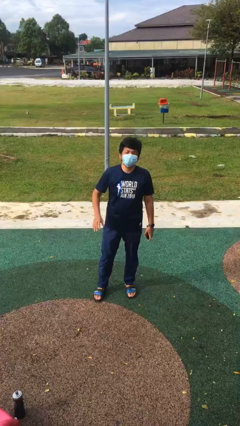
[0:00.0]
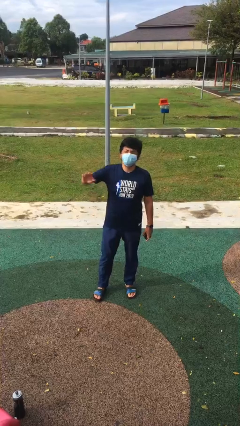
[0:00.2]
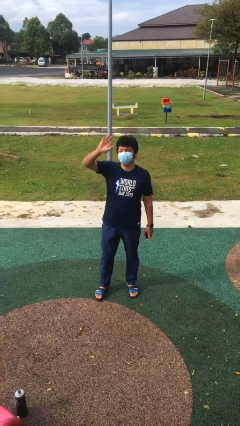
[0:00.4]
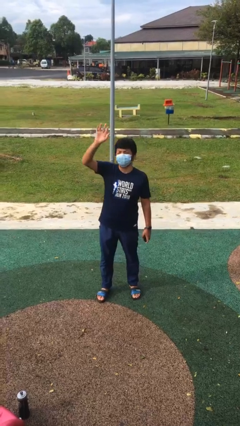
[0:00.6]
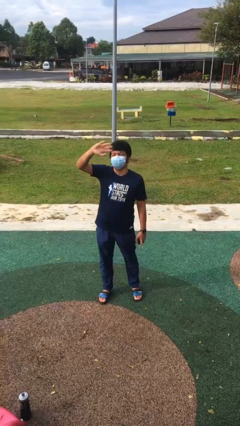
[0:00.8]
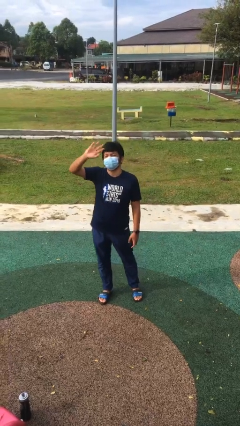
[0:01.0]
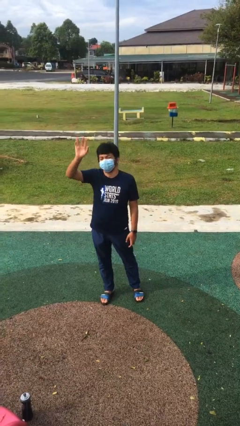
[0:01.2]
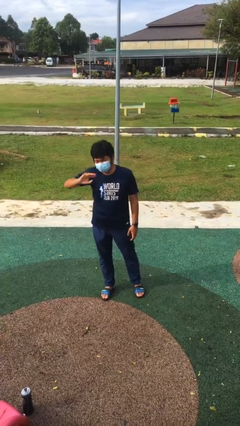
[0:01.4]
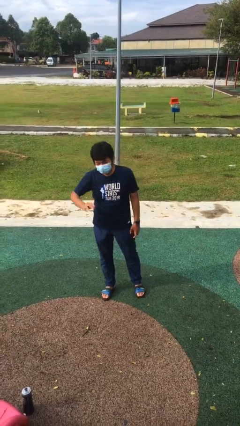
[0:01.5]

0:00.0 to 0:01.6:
person waves at person

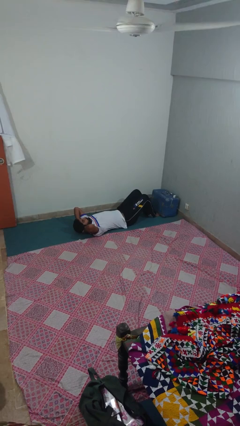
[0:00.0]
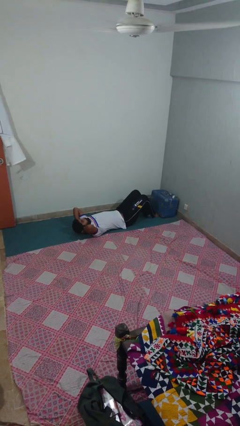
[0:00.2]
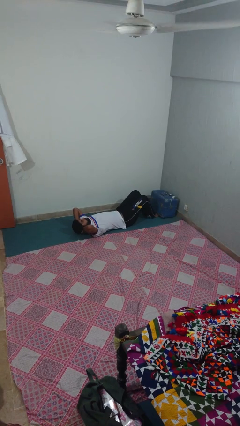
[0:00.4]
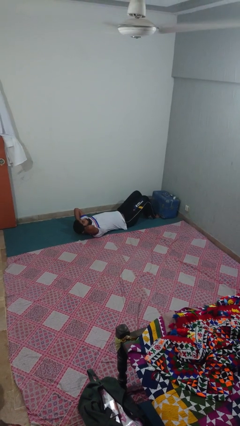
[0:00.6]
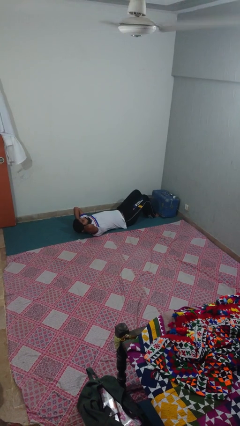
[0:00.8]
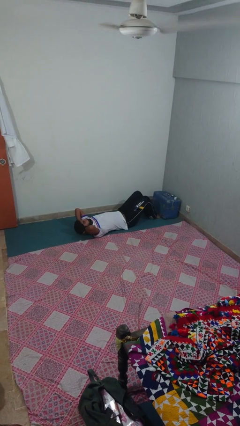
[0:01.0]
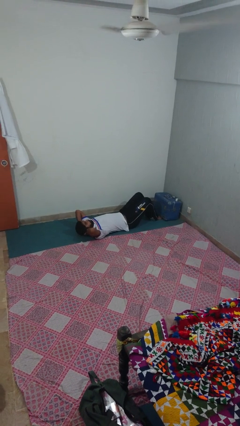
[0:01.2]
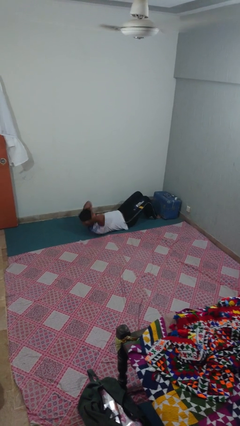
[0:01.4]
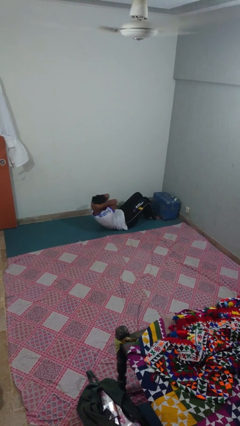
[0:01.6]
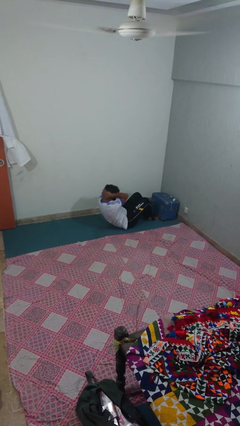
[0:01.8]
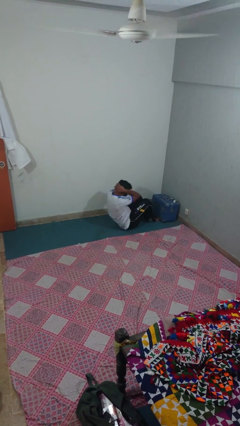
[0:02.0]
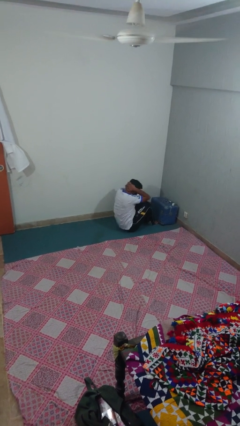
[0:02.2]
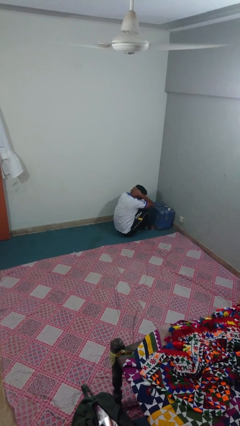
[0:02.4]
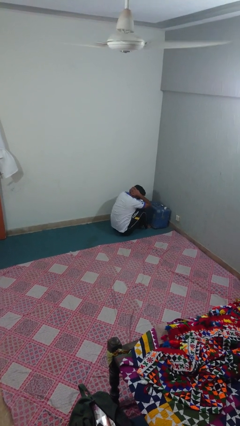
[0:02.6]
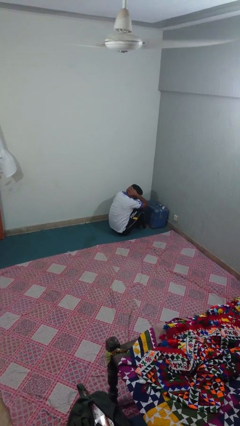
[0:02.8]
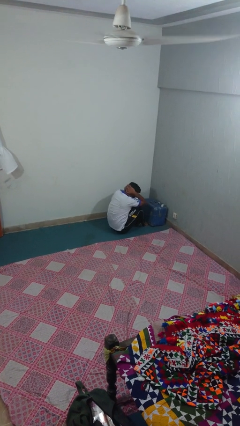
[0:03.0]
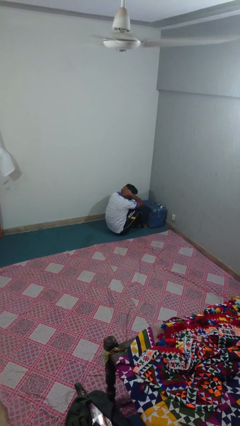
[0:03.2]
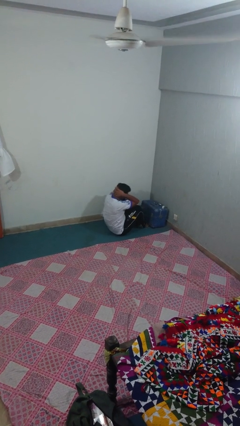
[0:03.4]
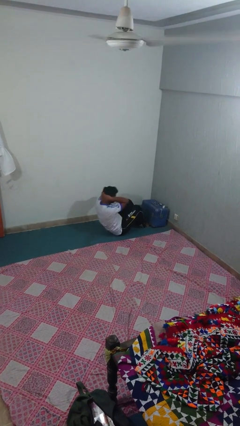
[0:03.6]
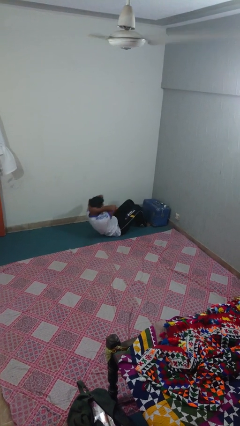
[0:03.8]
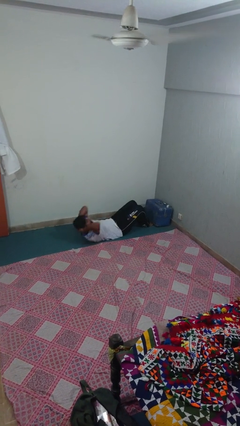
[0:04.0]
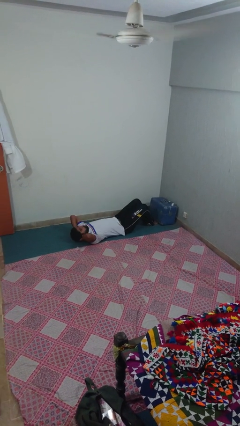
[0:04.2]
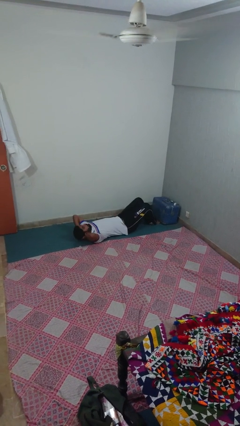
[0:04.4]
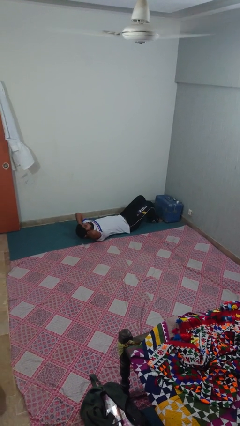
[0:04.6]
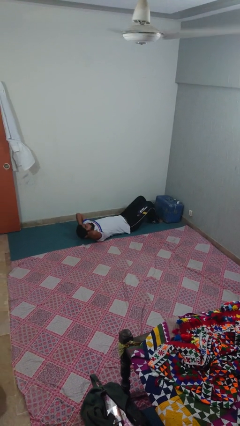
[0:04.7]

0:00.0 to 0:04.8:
person exercises with situp

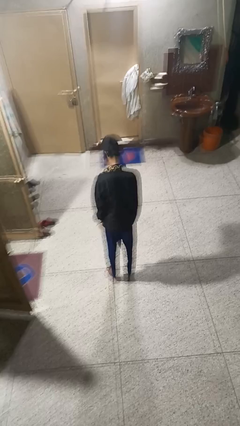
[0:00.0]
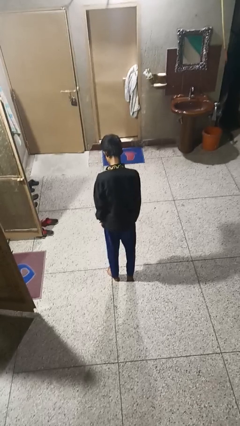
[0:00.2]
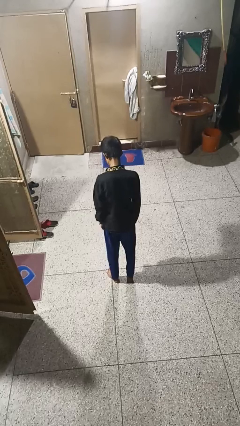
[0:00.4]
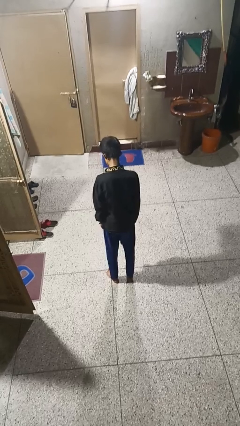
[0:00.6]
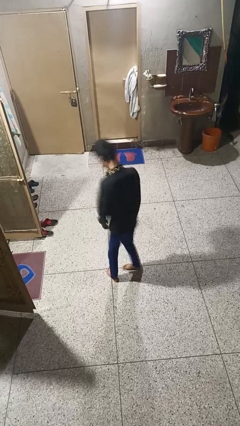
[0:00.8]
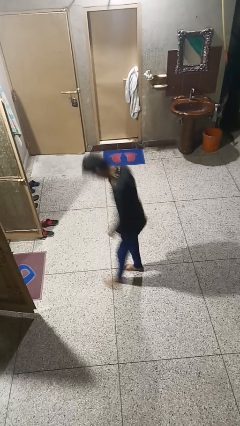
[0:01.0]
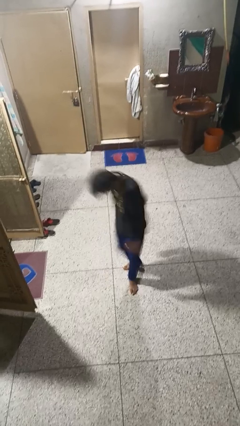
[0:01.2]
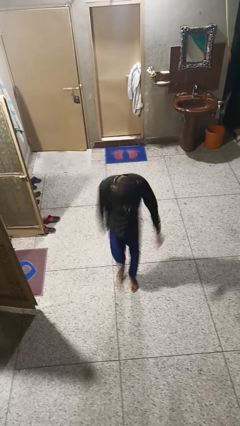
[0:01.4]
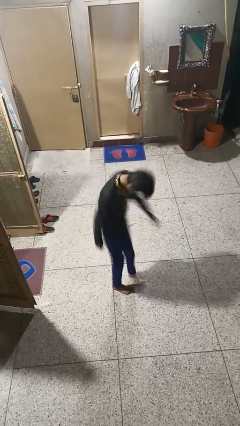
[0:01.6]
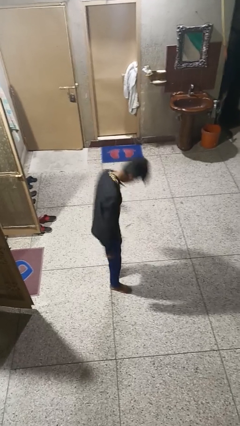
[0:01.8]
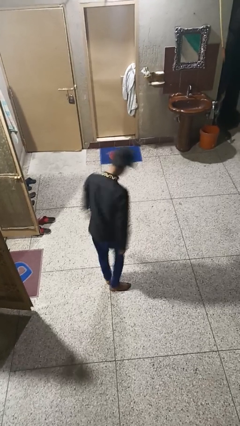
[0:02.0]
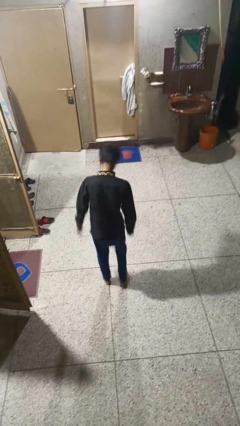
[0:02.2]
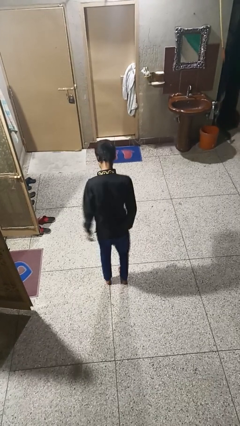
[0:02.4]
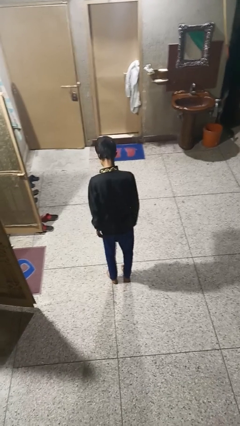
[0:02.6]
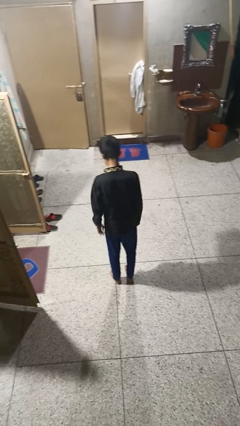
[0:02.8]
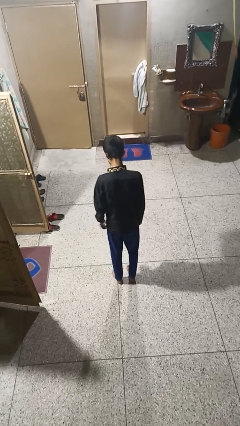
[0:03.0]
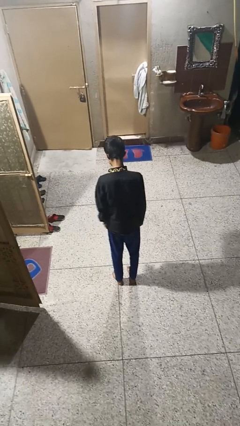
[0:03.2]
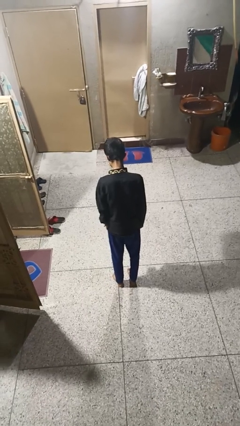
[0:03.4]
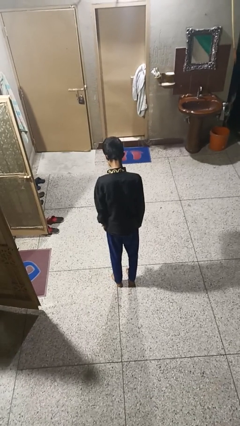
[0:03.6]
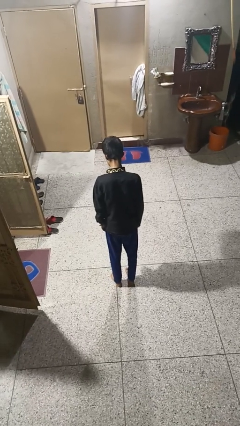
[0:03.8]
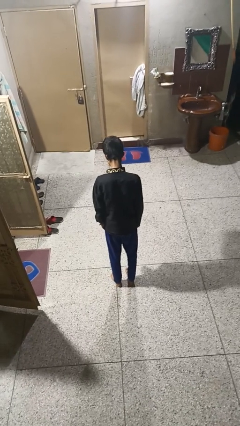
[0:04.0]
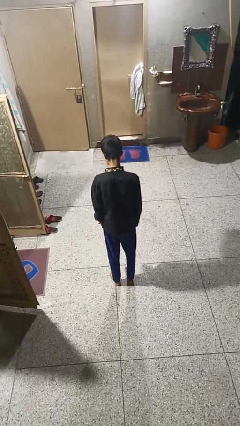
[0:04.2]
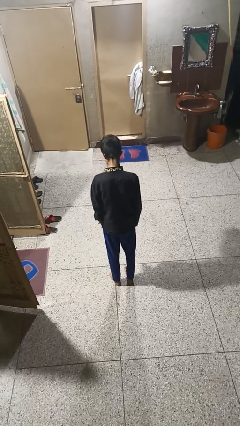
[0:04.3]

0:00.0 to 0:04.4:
person twirls

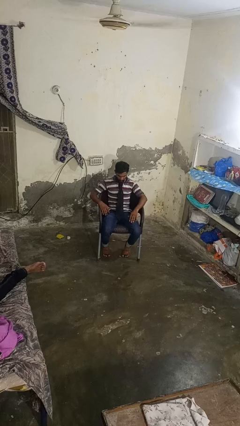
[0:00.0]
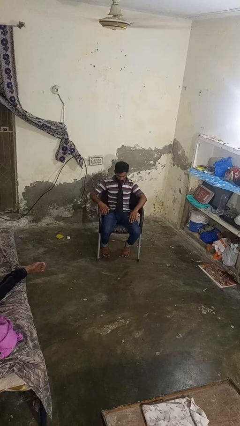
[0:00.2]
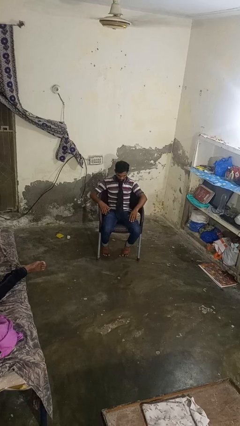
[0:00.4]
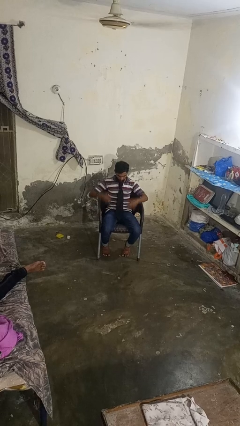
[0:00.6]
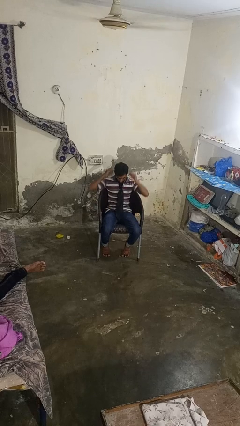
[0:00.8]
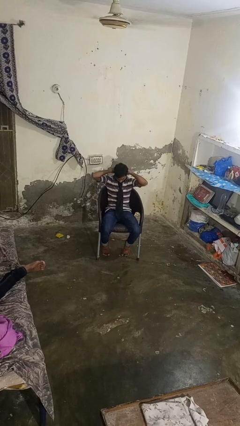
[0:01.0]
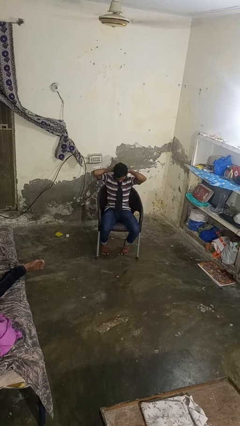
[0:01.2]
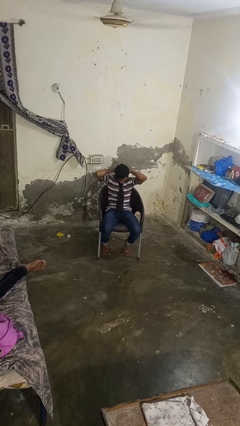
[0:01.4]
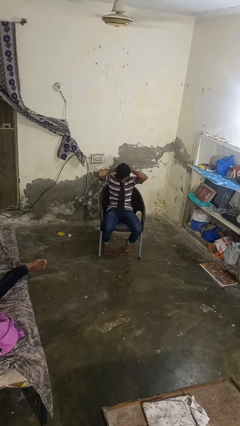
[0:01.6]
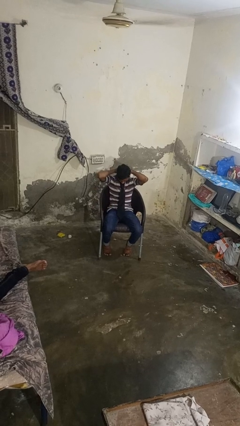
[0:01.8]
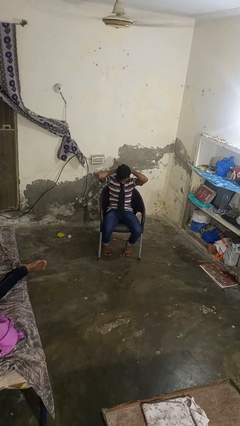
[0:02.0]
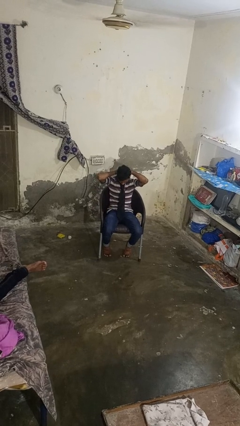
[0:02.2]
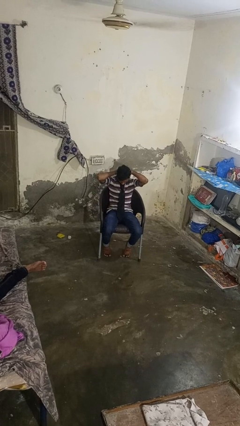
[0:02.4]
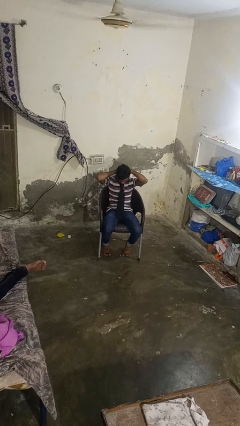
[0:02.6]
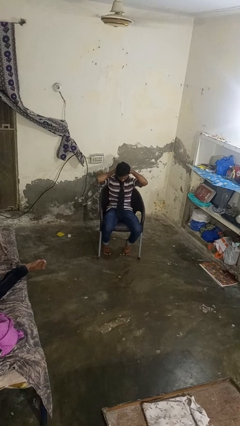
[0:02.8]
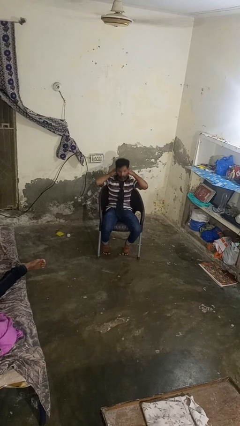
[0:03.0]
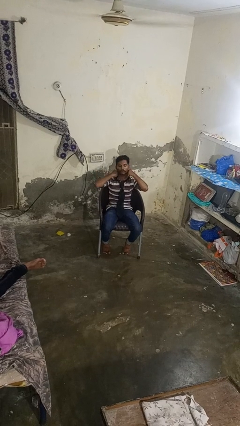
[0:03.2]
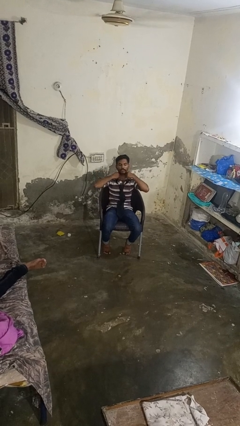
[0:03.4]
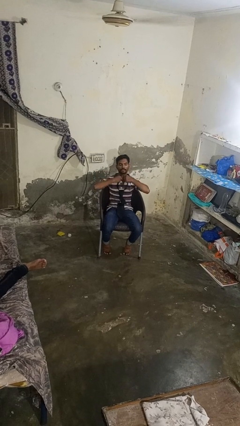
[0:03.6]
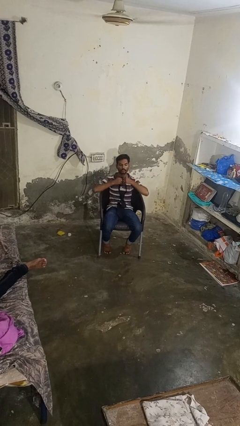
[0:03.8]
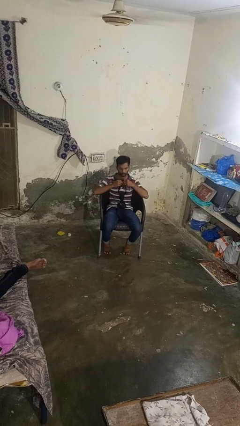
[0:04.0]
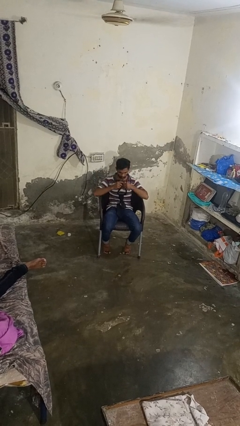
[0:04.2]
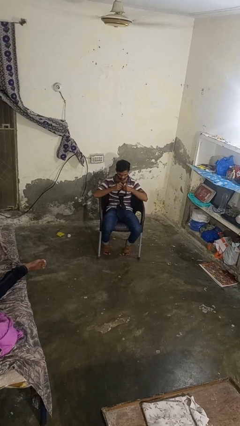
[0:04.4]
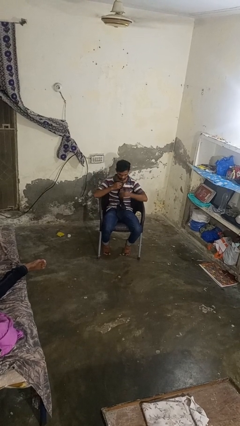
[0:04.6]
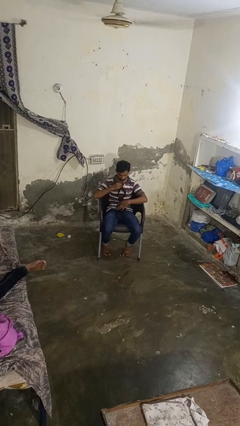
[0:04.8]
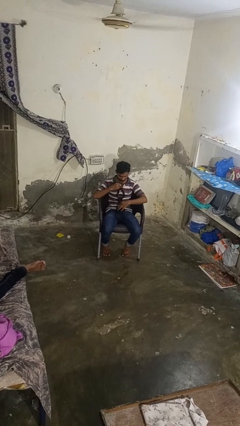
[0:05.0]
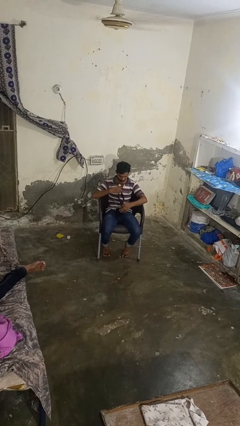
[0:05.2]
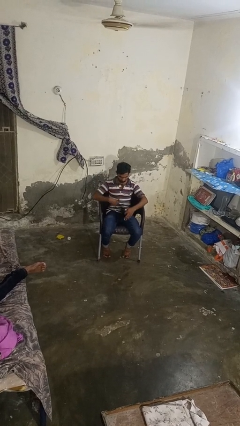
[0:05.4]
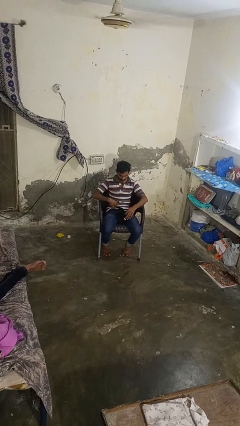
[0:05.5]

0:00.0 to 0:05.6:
person takes off necktie

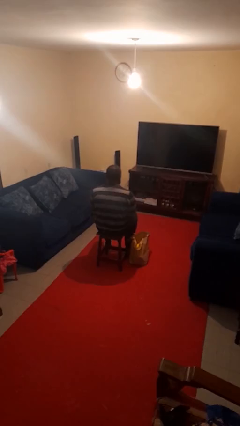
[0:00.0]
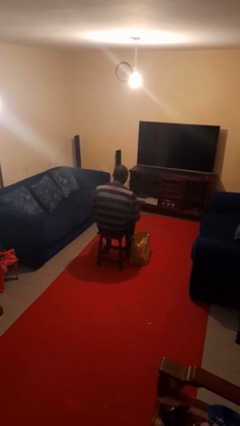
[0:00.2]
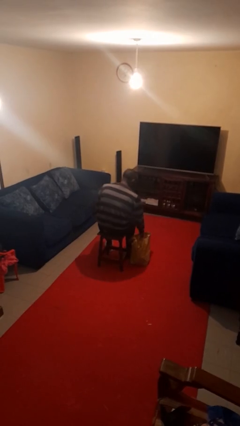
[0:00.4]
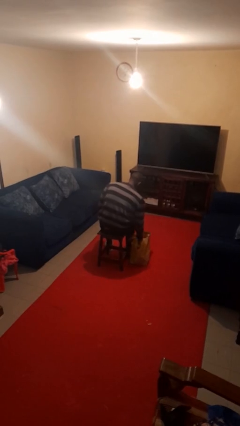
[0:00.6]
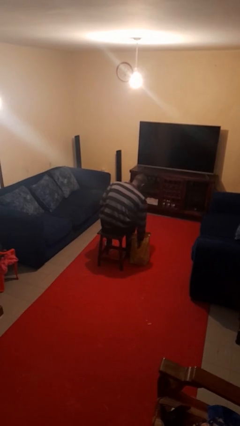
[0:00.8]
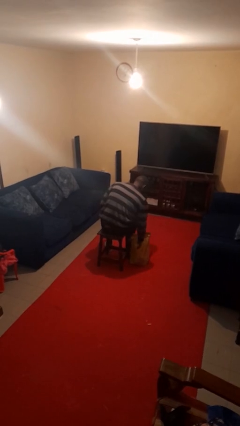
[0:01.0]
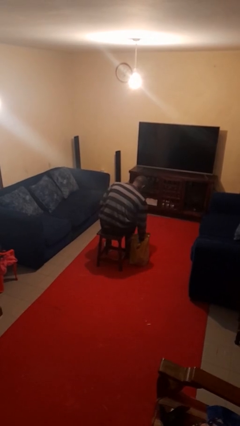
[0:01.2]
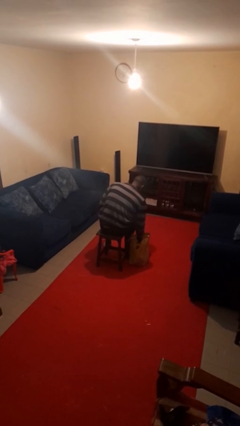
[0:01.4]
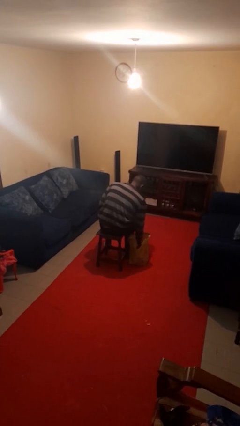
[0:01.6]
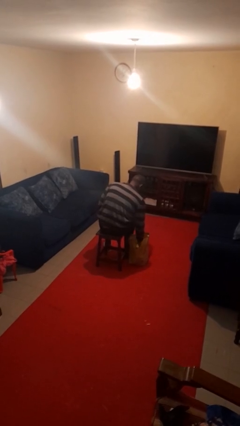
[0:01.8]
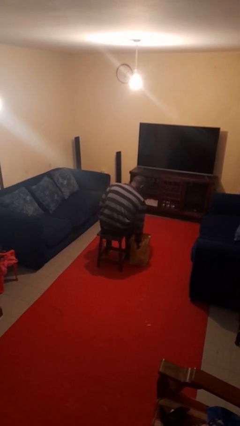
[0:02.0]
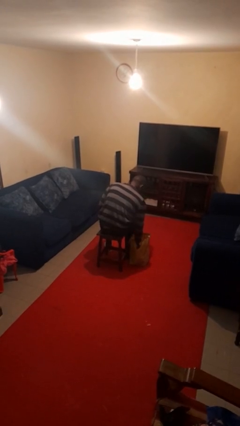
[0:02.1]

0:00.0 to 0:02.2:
person searches in bag
